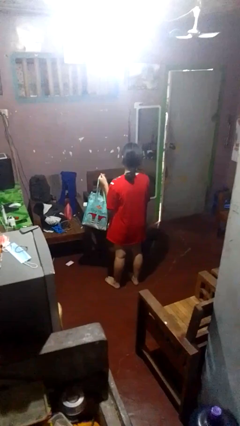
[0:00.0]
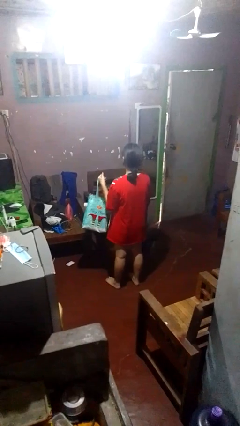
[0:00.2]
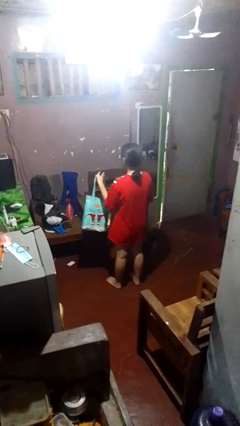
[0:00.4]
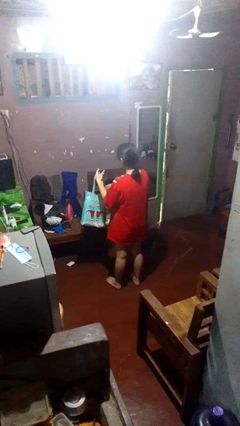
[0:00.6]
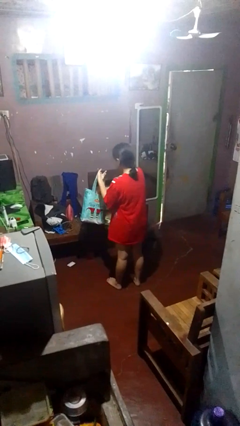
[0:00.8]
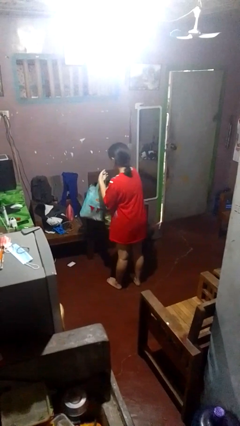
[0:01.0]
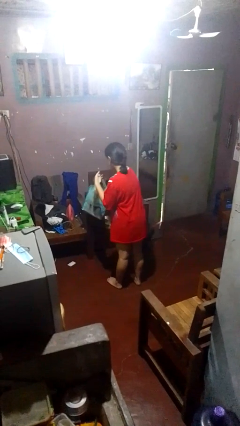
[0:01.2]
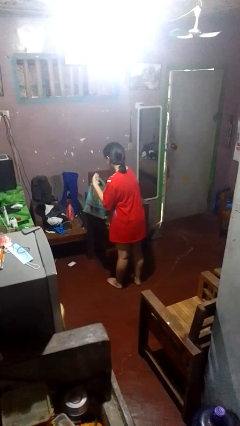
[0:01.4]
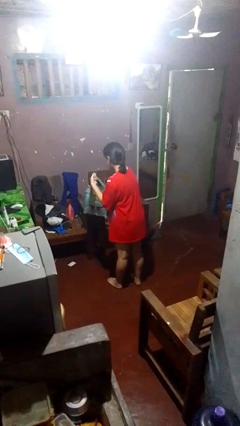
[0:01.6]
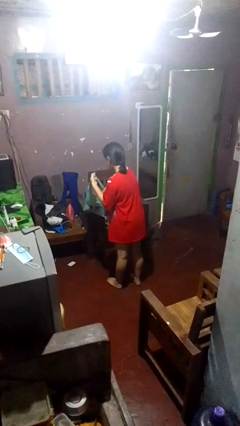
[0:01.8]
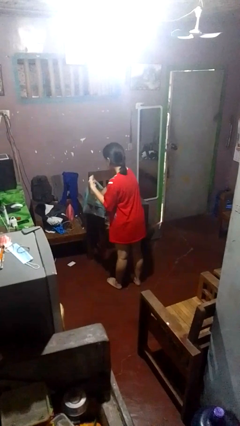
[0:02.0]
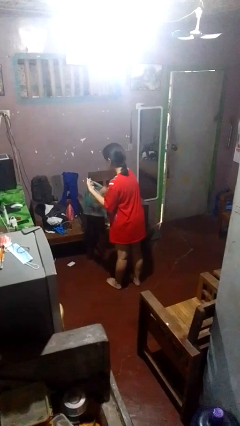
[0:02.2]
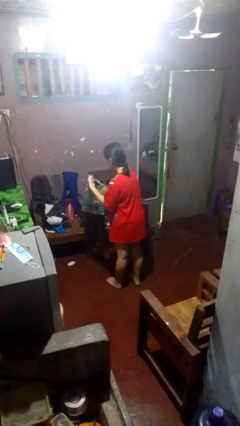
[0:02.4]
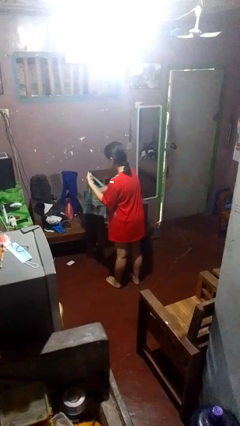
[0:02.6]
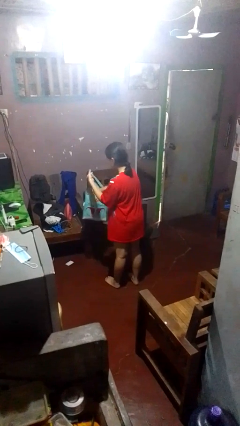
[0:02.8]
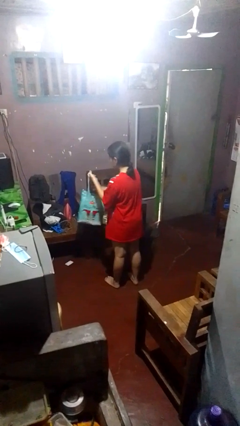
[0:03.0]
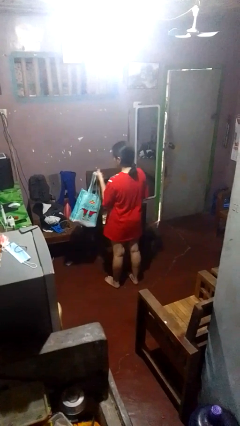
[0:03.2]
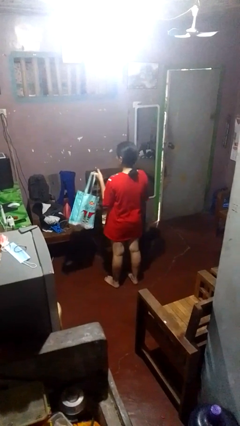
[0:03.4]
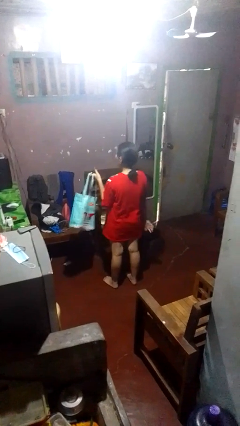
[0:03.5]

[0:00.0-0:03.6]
person searches in bag

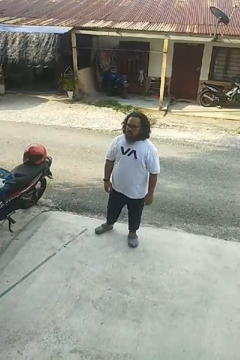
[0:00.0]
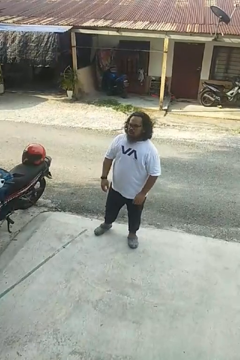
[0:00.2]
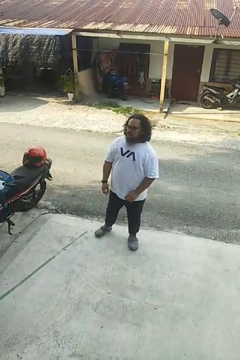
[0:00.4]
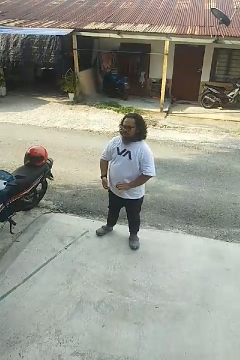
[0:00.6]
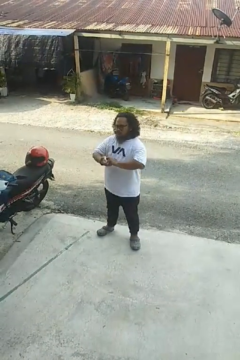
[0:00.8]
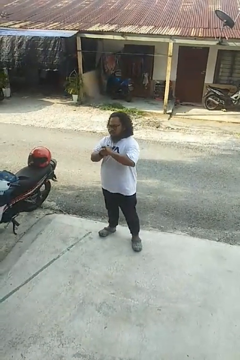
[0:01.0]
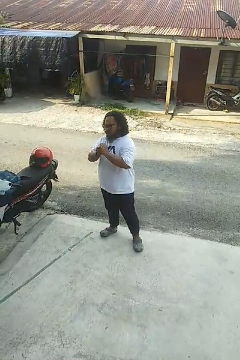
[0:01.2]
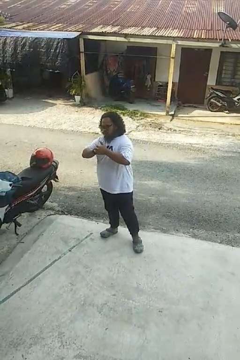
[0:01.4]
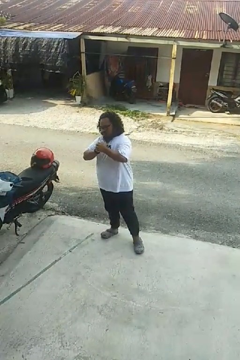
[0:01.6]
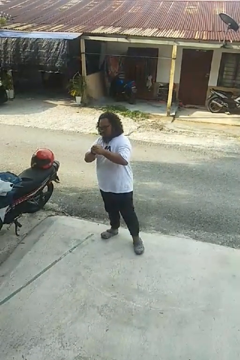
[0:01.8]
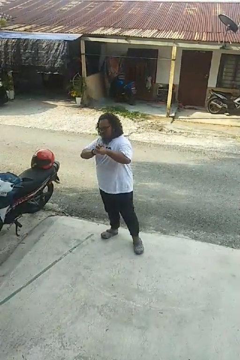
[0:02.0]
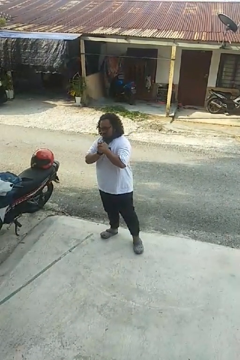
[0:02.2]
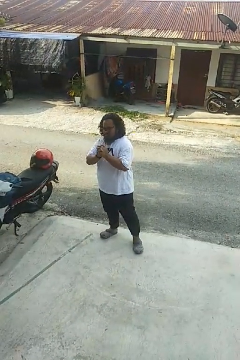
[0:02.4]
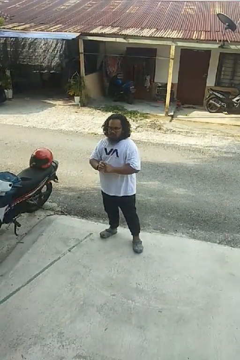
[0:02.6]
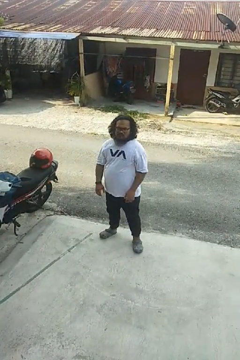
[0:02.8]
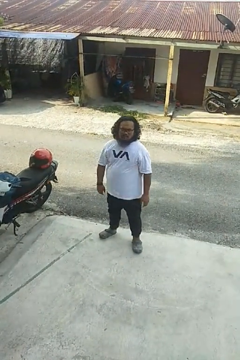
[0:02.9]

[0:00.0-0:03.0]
person cracks knuckles

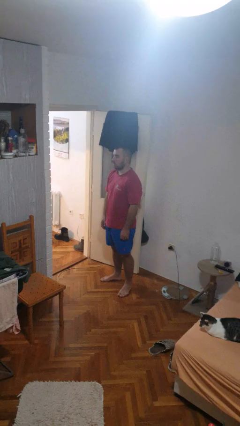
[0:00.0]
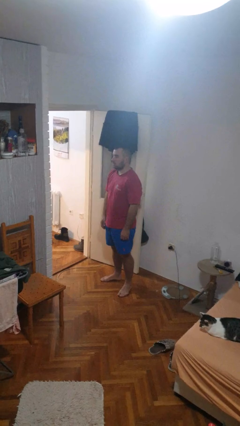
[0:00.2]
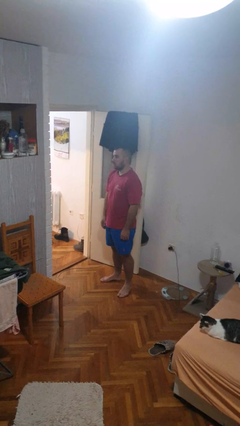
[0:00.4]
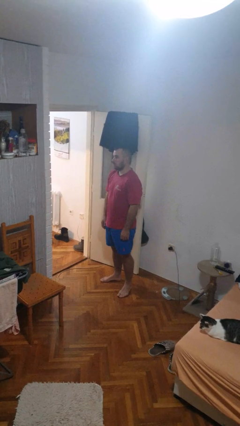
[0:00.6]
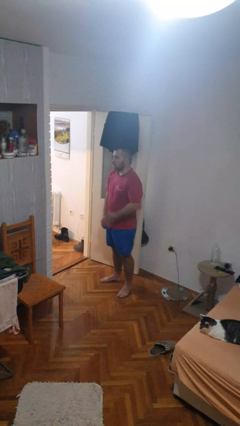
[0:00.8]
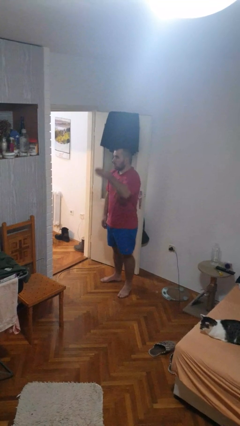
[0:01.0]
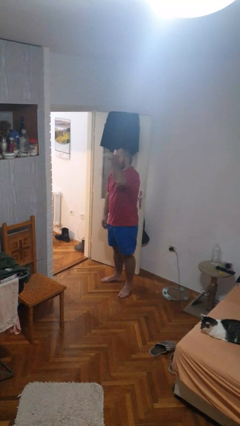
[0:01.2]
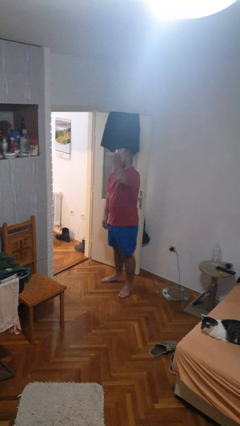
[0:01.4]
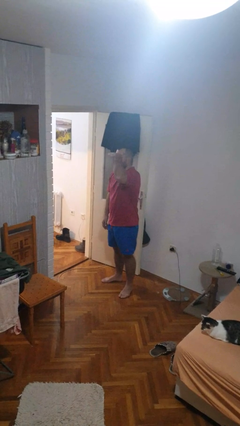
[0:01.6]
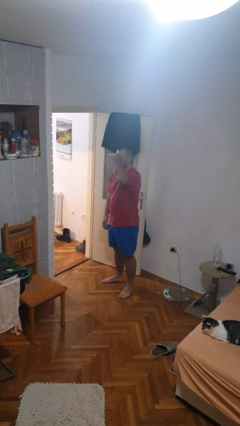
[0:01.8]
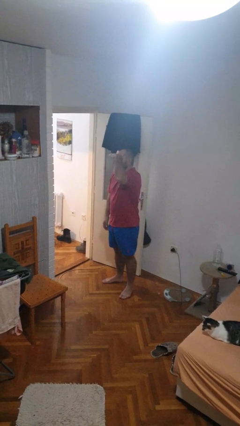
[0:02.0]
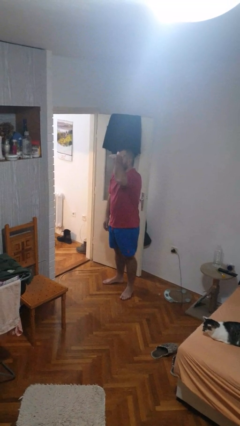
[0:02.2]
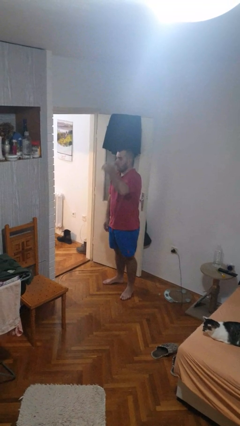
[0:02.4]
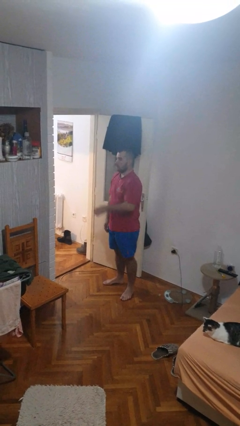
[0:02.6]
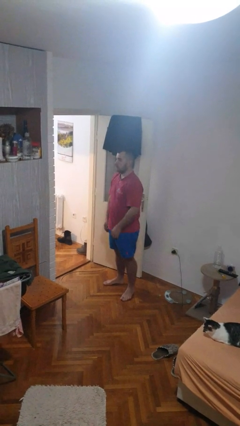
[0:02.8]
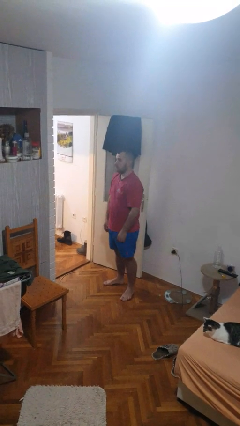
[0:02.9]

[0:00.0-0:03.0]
person shades eyes

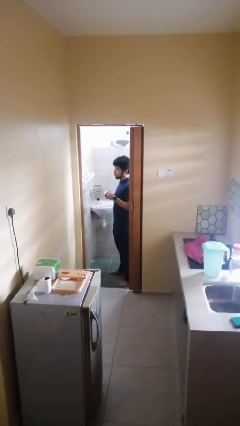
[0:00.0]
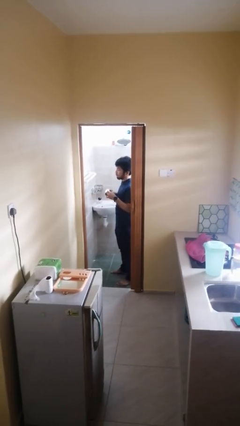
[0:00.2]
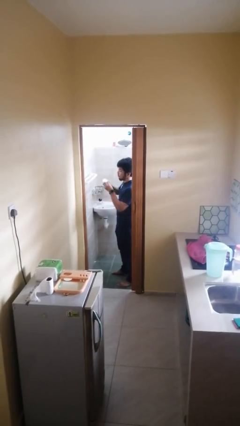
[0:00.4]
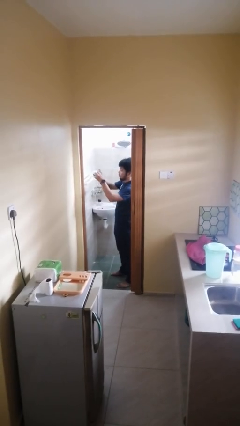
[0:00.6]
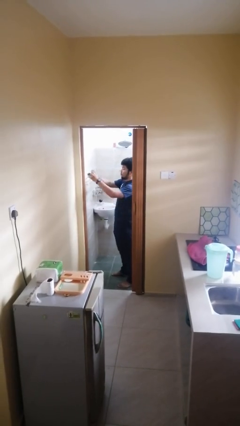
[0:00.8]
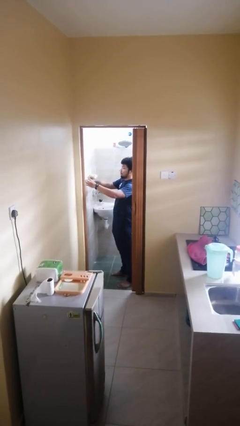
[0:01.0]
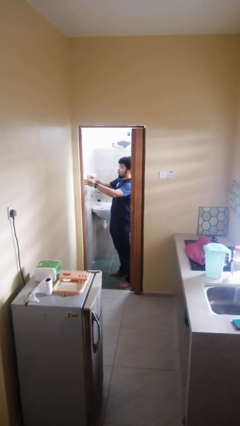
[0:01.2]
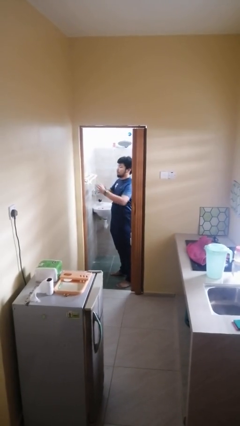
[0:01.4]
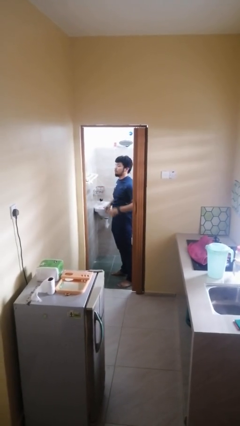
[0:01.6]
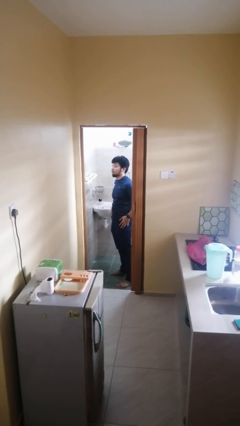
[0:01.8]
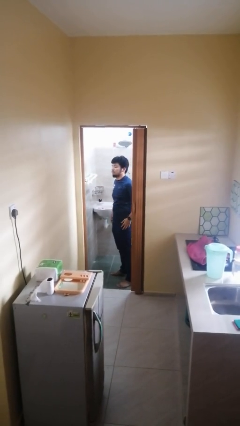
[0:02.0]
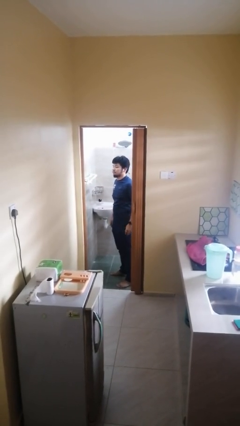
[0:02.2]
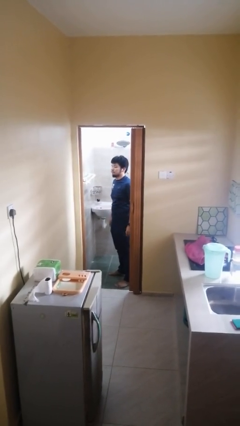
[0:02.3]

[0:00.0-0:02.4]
person puts down object on countertop

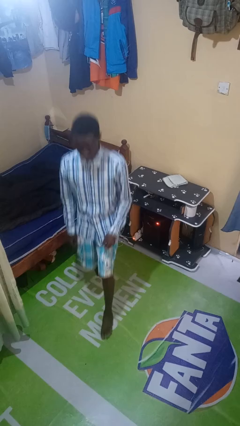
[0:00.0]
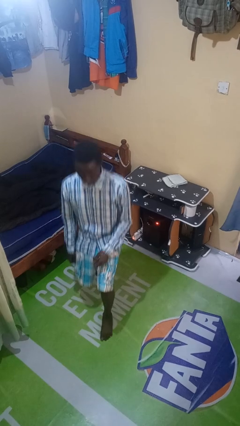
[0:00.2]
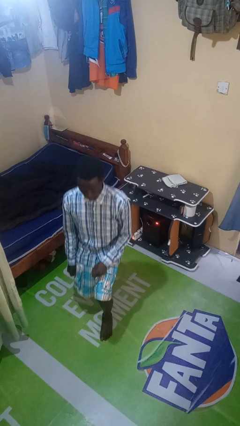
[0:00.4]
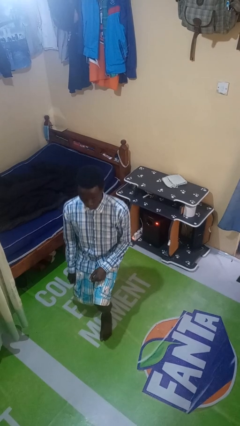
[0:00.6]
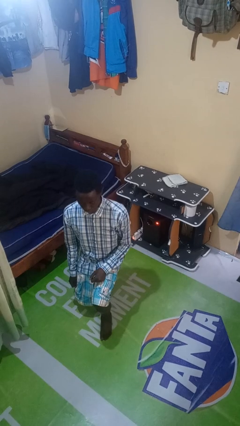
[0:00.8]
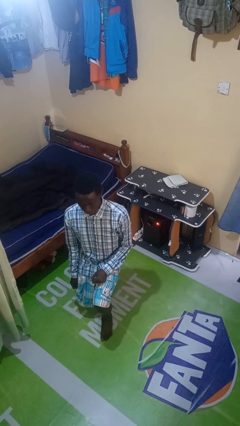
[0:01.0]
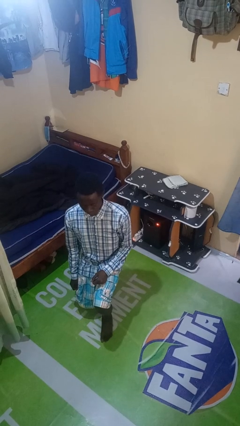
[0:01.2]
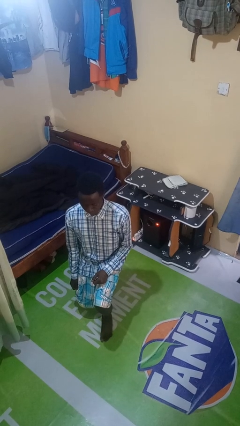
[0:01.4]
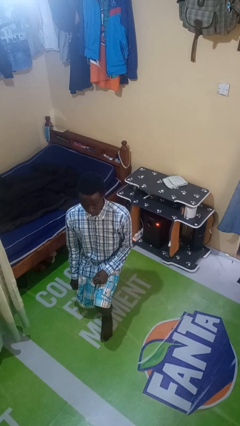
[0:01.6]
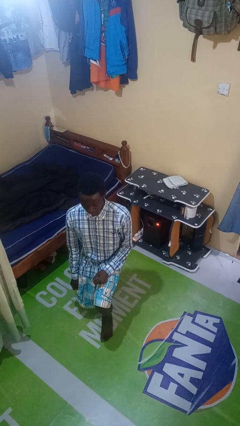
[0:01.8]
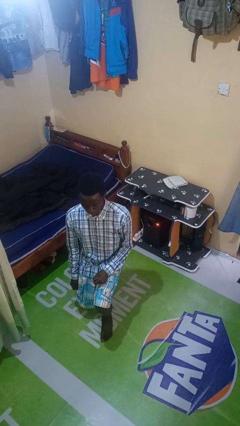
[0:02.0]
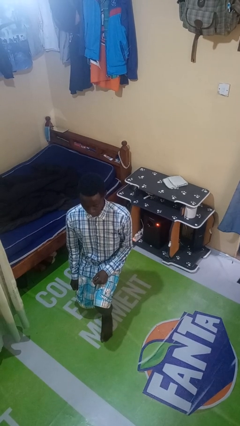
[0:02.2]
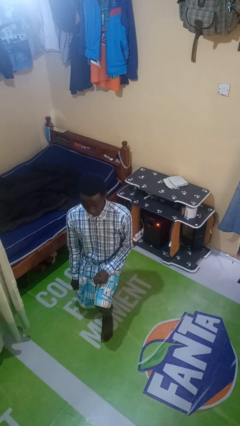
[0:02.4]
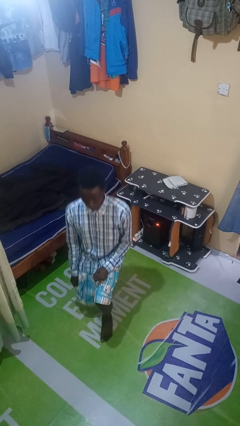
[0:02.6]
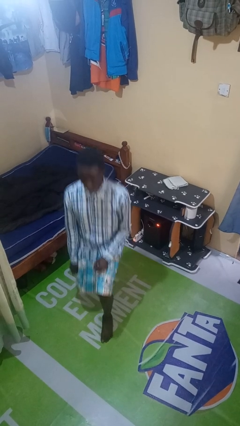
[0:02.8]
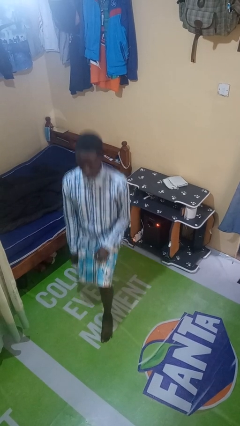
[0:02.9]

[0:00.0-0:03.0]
person exercises with lunges

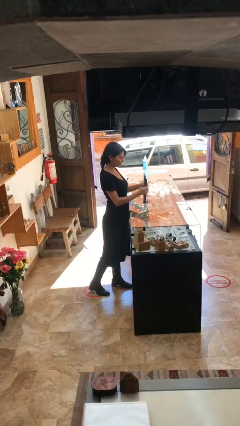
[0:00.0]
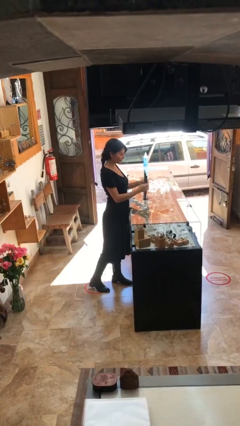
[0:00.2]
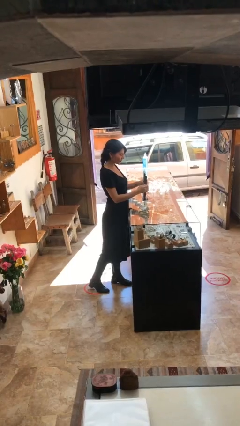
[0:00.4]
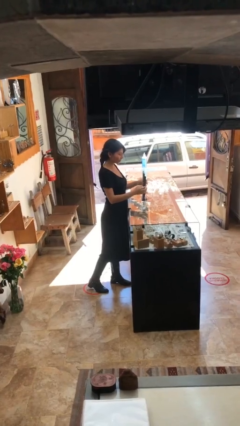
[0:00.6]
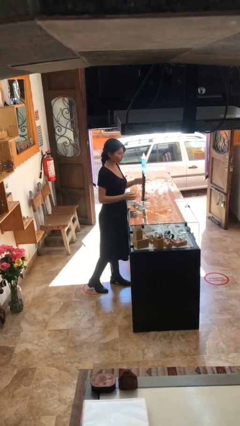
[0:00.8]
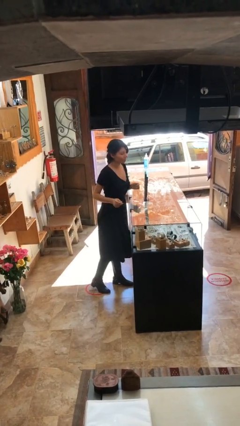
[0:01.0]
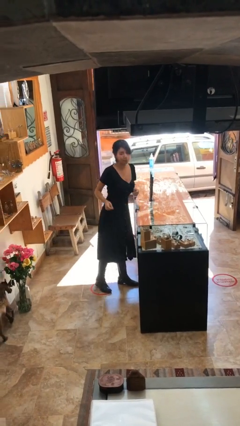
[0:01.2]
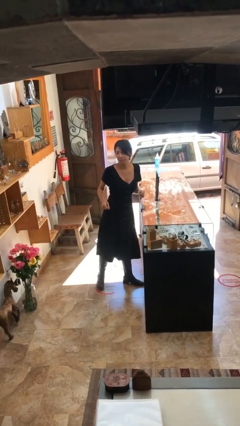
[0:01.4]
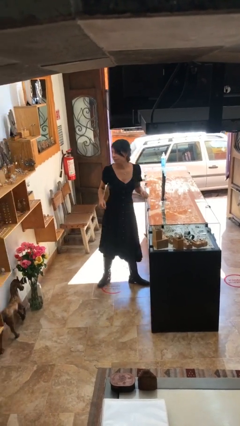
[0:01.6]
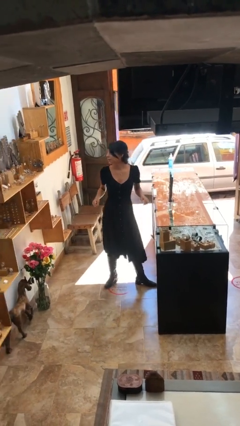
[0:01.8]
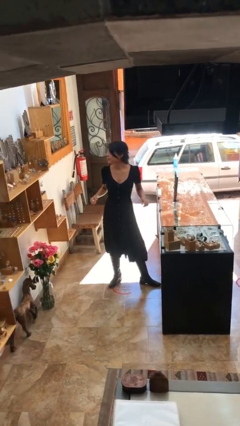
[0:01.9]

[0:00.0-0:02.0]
person puts down object on table

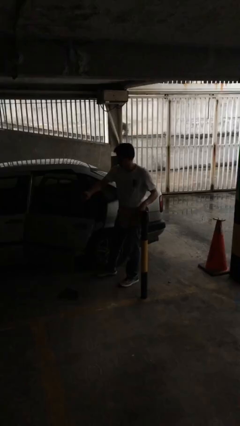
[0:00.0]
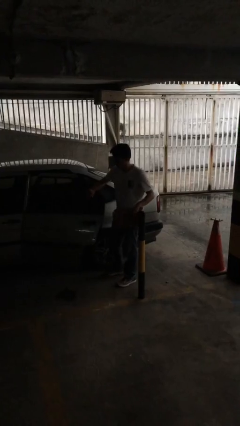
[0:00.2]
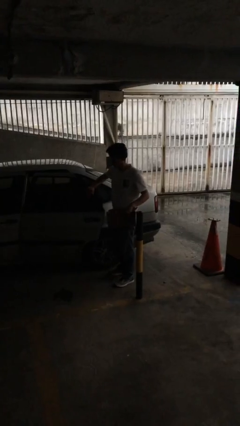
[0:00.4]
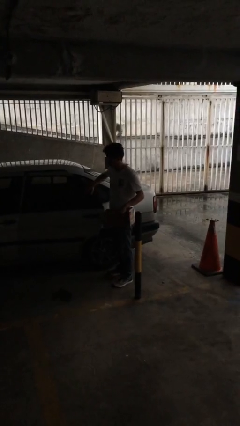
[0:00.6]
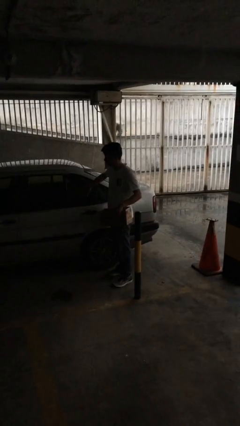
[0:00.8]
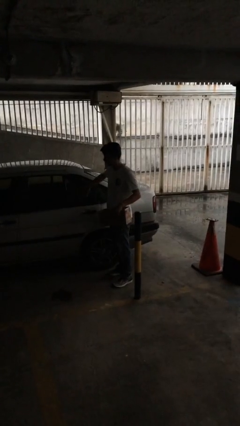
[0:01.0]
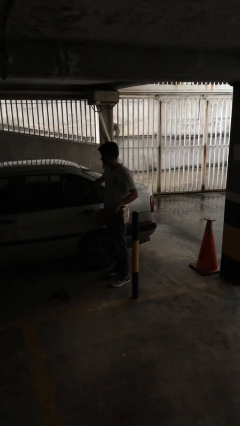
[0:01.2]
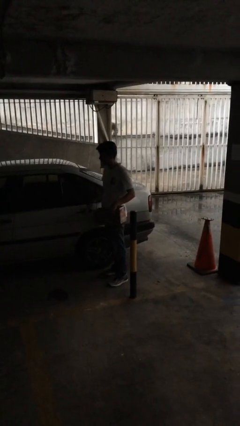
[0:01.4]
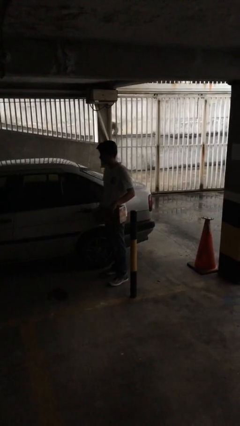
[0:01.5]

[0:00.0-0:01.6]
person closes car door
